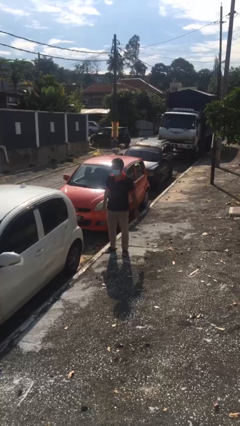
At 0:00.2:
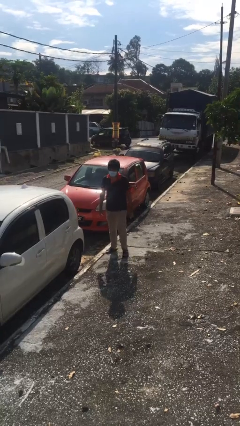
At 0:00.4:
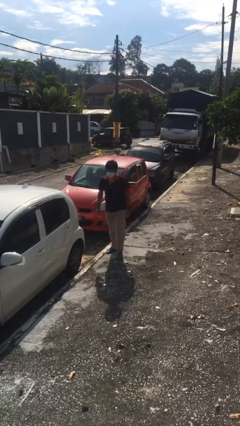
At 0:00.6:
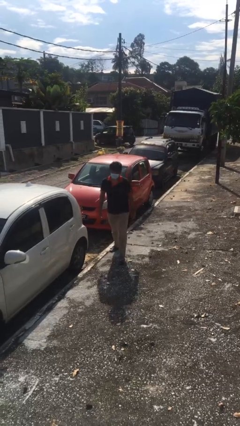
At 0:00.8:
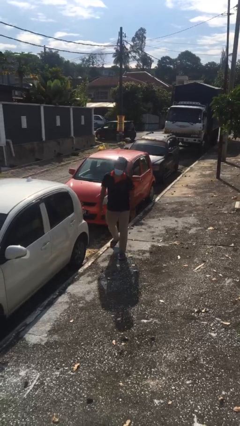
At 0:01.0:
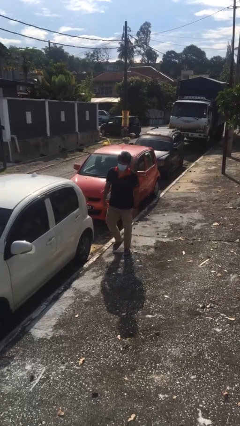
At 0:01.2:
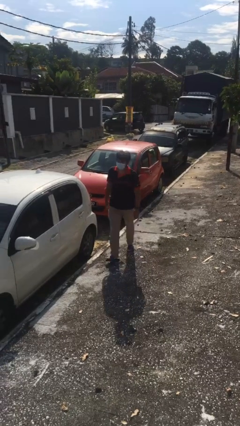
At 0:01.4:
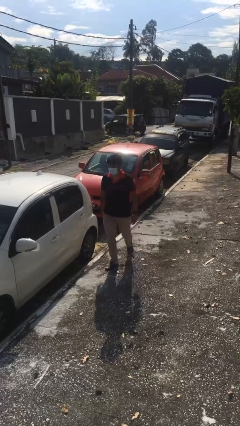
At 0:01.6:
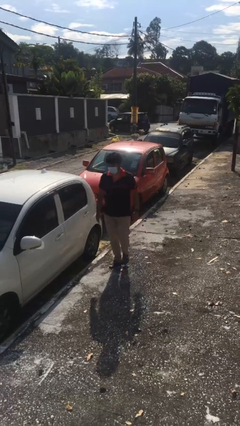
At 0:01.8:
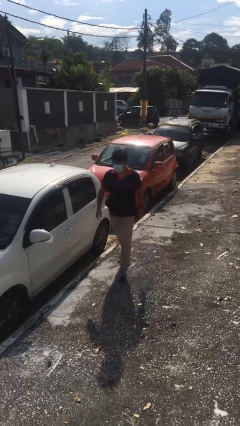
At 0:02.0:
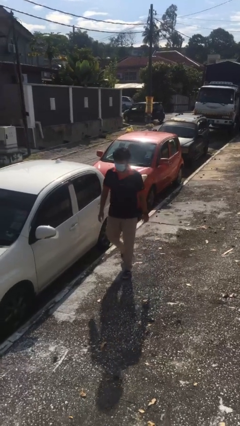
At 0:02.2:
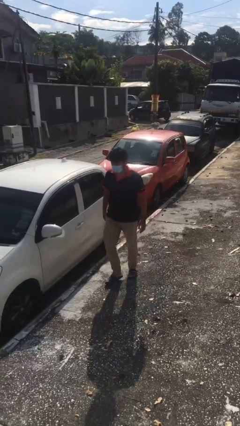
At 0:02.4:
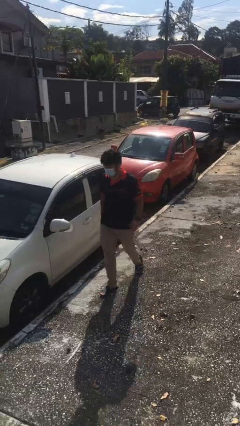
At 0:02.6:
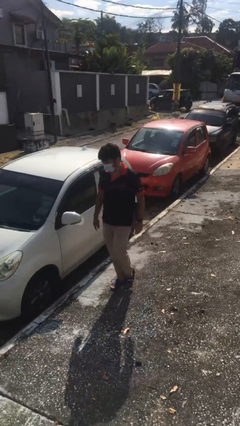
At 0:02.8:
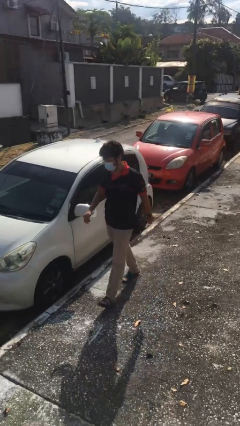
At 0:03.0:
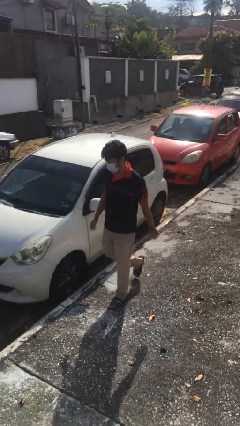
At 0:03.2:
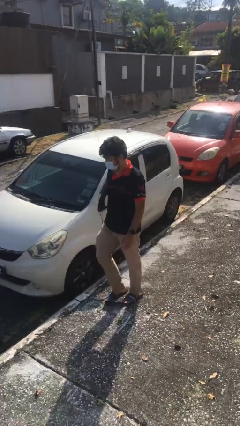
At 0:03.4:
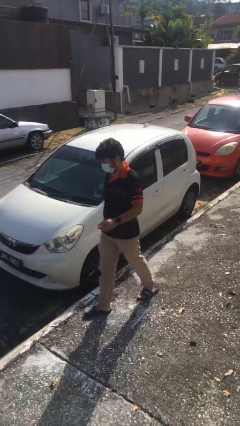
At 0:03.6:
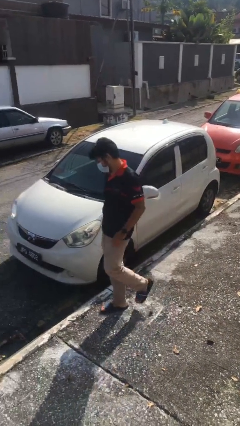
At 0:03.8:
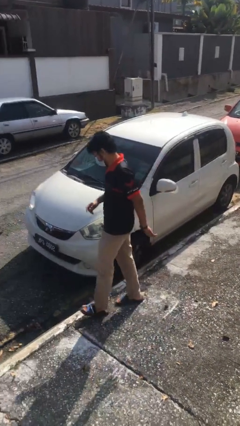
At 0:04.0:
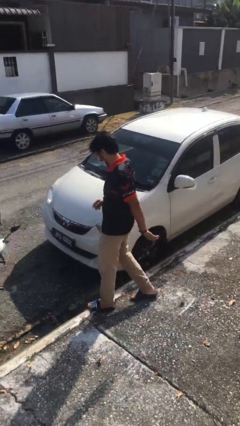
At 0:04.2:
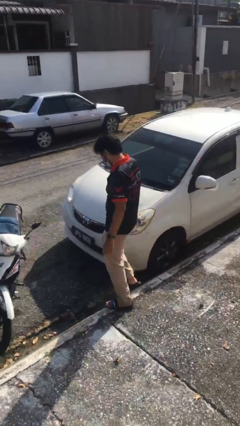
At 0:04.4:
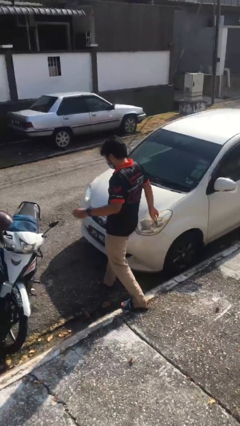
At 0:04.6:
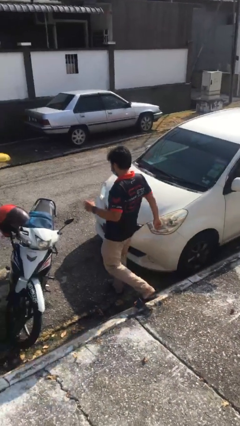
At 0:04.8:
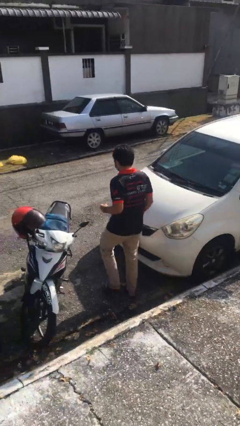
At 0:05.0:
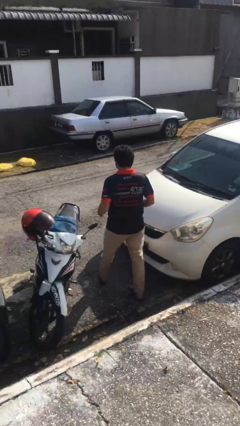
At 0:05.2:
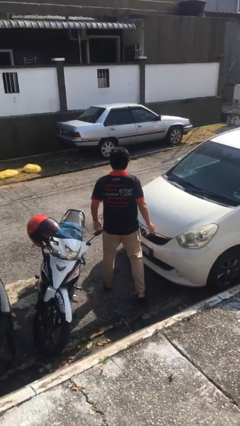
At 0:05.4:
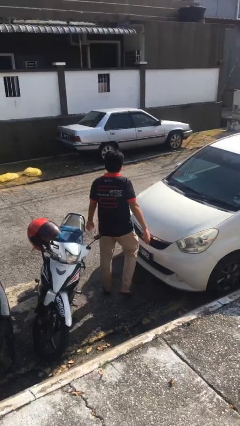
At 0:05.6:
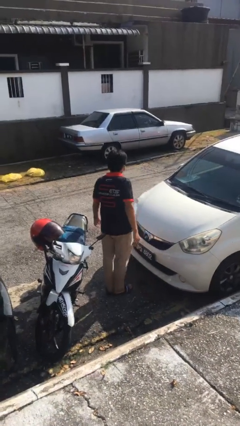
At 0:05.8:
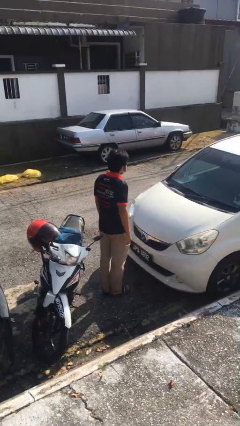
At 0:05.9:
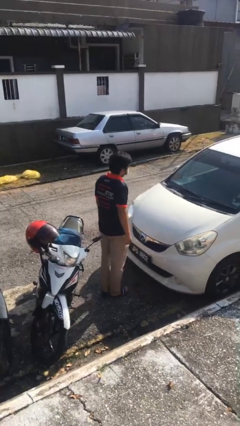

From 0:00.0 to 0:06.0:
person walks around car

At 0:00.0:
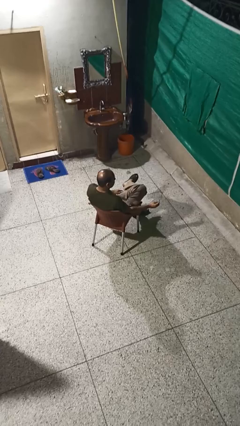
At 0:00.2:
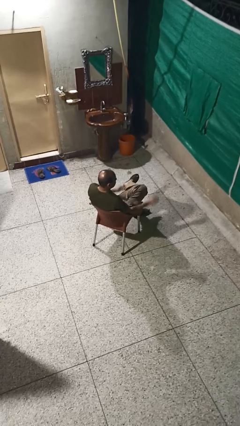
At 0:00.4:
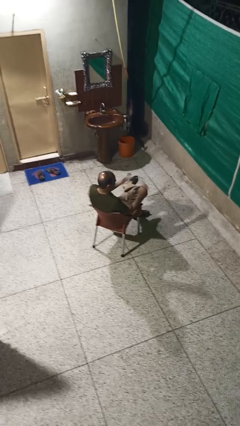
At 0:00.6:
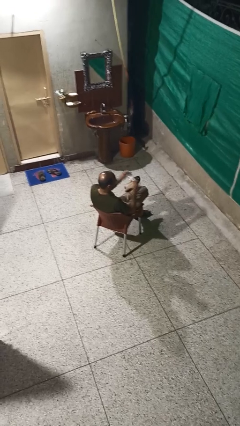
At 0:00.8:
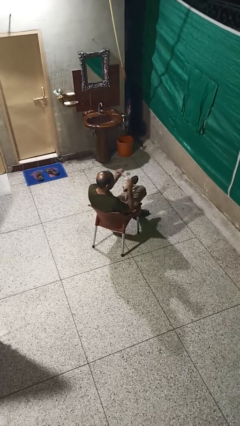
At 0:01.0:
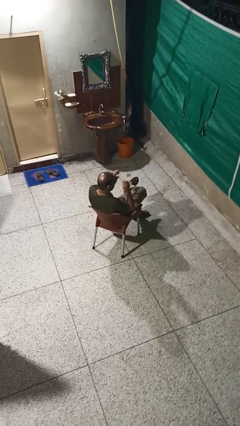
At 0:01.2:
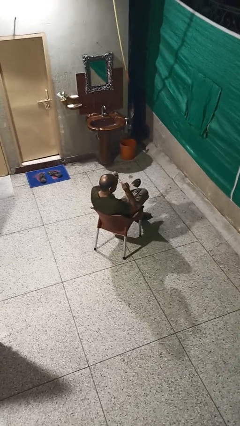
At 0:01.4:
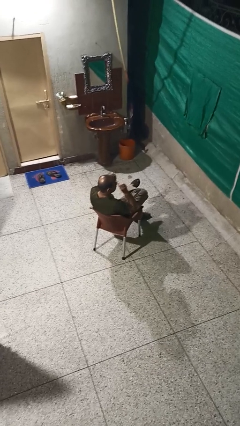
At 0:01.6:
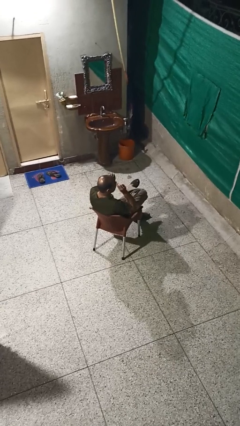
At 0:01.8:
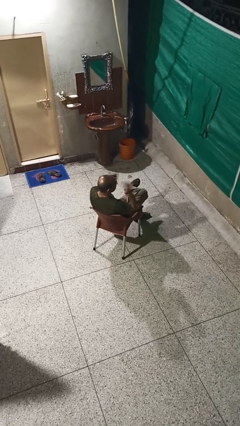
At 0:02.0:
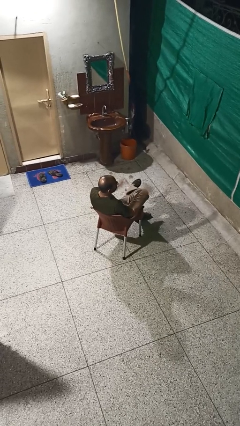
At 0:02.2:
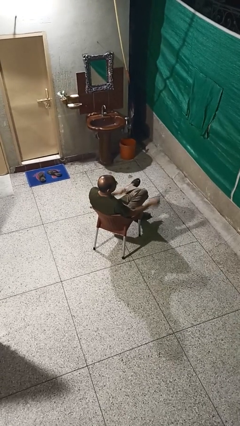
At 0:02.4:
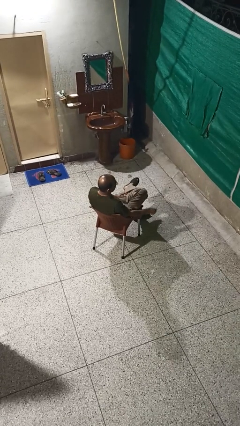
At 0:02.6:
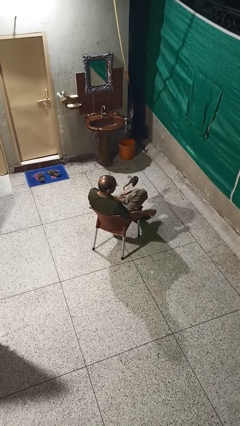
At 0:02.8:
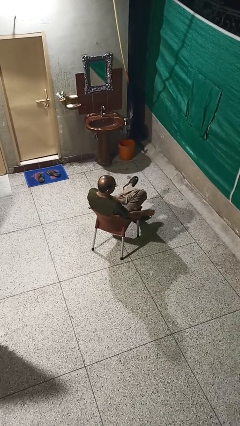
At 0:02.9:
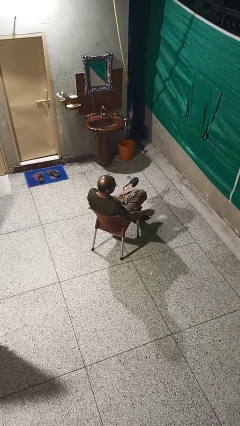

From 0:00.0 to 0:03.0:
person puts on glasses

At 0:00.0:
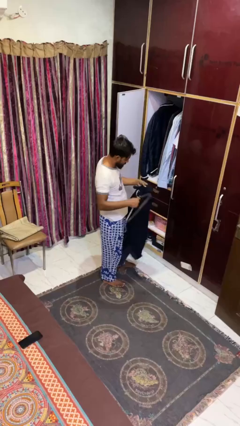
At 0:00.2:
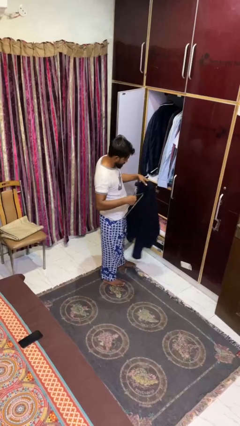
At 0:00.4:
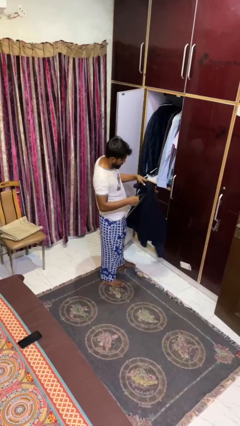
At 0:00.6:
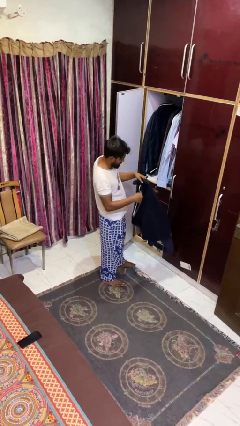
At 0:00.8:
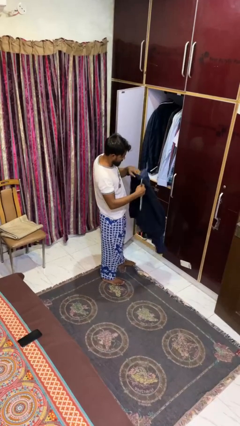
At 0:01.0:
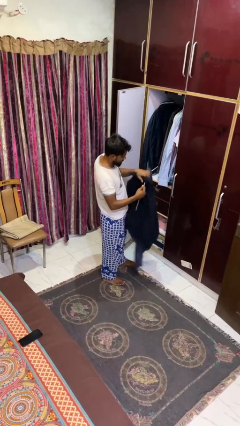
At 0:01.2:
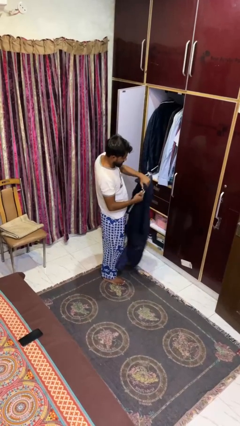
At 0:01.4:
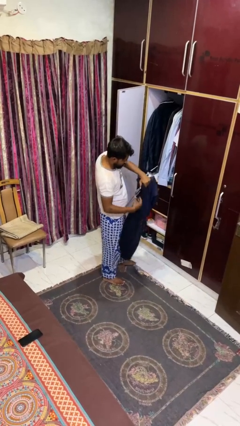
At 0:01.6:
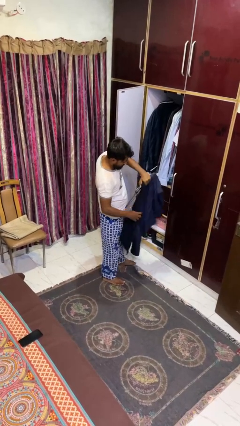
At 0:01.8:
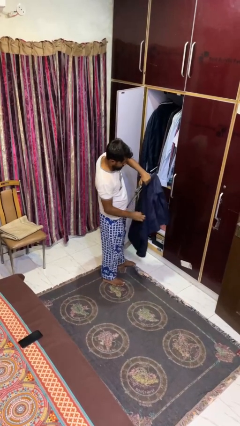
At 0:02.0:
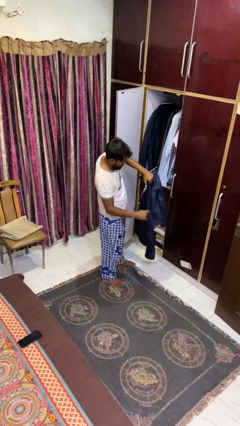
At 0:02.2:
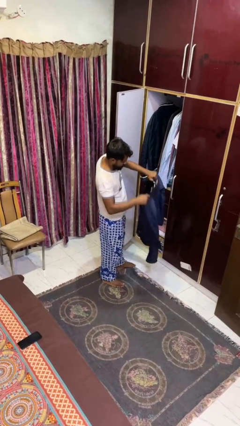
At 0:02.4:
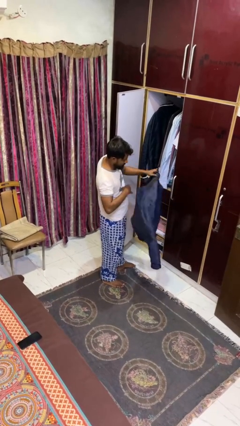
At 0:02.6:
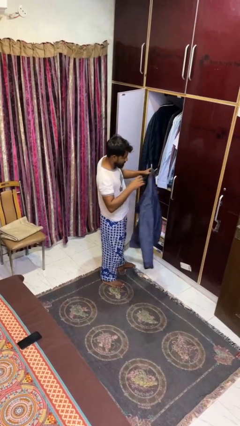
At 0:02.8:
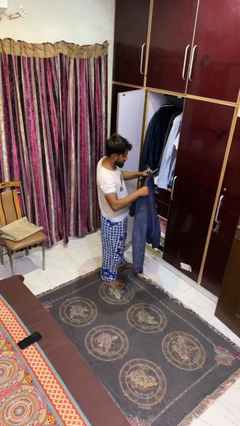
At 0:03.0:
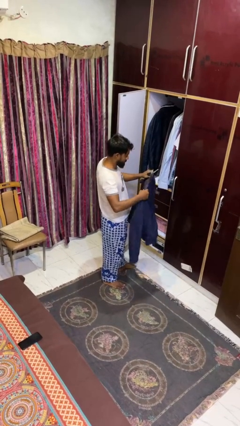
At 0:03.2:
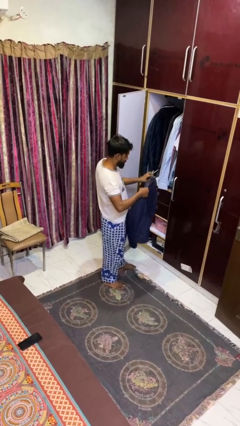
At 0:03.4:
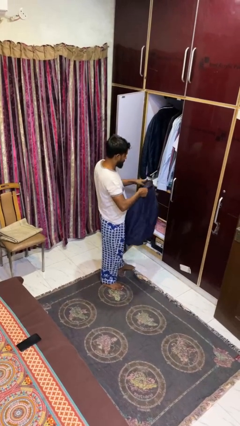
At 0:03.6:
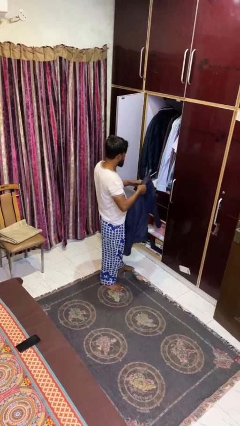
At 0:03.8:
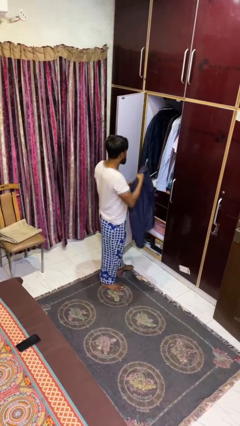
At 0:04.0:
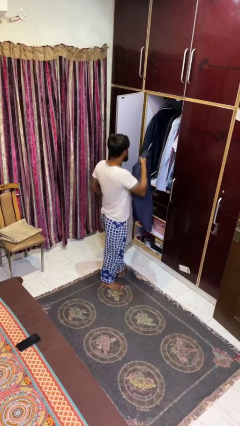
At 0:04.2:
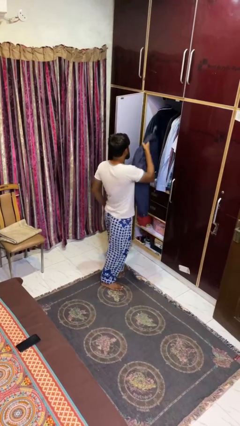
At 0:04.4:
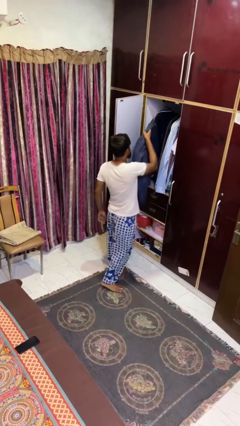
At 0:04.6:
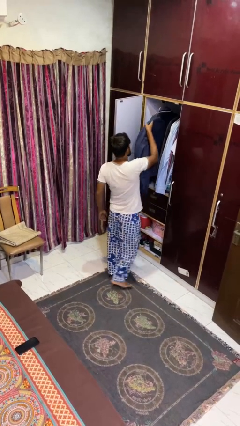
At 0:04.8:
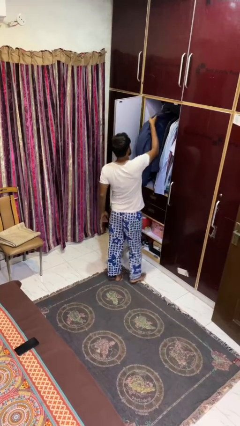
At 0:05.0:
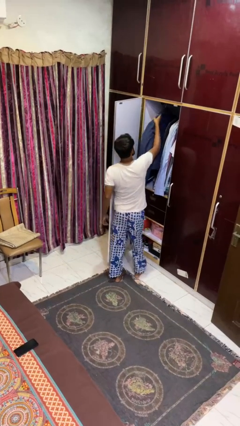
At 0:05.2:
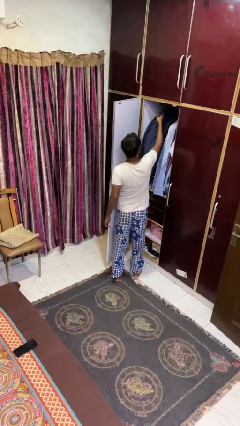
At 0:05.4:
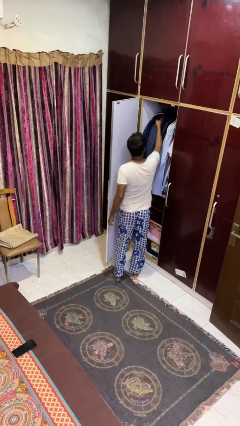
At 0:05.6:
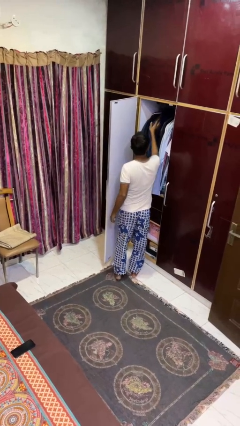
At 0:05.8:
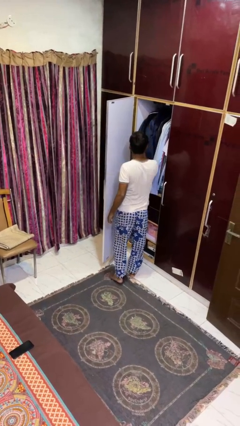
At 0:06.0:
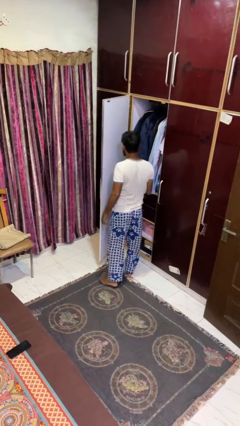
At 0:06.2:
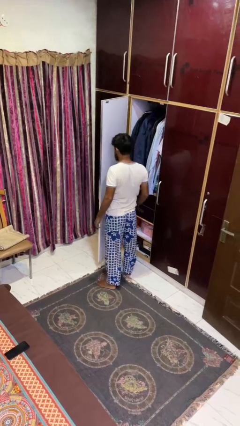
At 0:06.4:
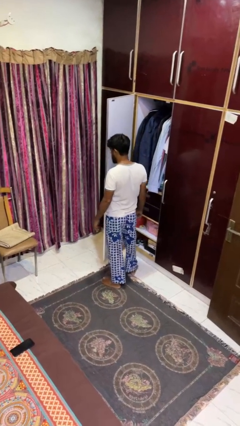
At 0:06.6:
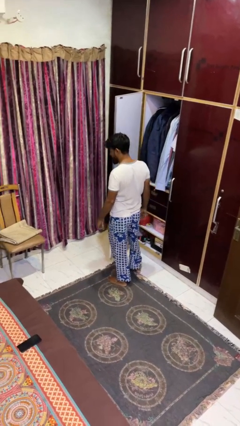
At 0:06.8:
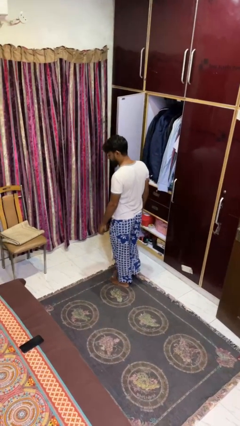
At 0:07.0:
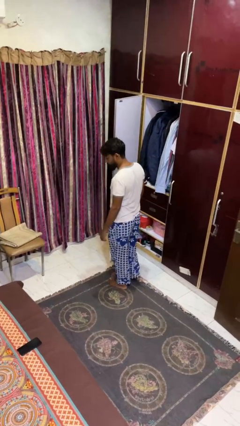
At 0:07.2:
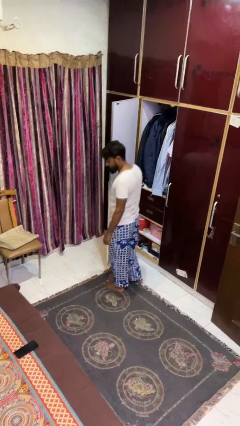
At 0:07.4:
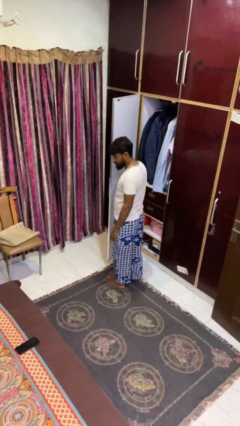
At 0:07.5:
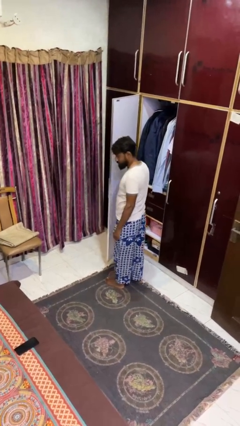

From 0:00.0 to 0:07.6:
person puts clothes into closet

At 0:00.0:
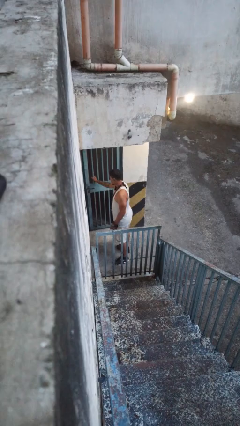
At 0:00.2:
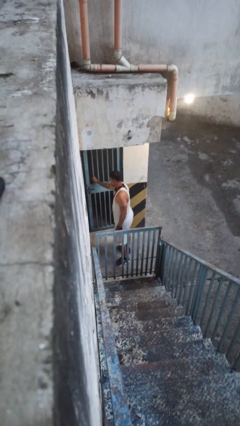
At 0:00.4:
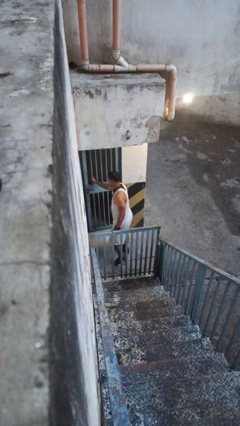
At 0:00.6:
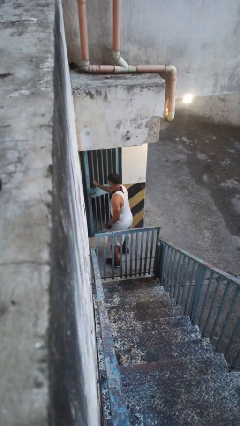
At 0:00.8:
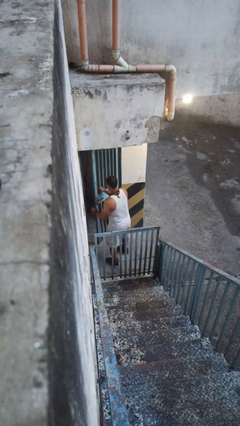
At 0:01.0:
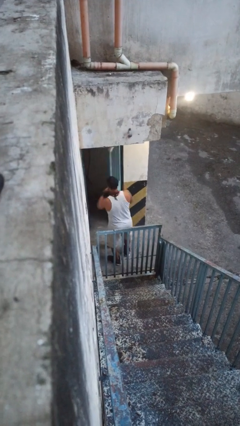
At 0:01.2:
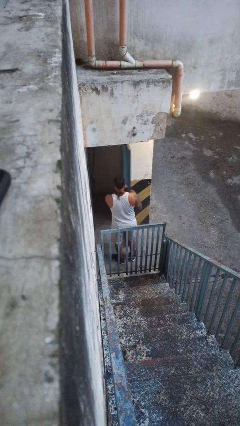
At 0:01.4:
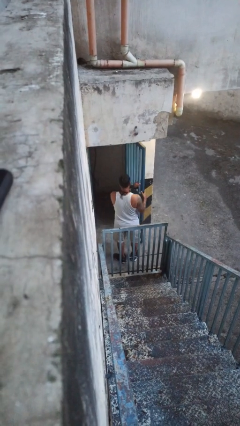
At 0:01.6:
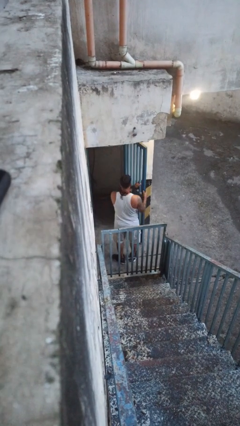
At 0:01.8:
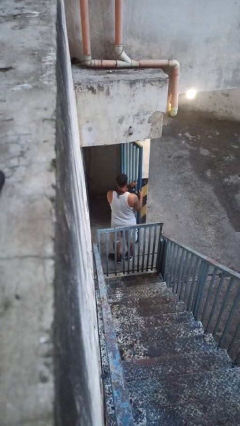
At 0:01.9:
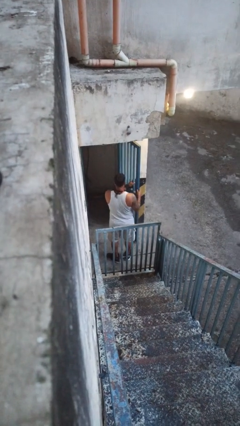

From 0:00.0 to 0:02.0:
person opens facility door
